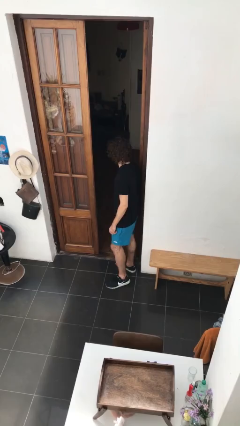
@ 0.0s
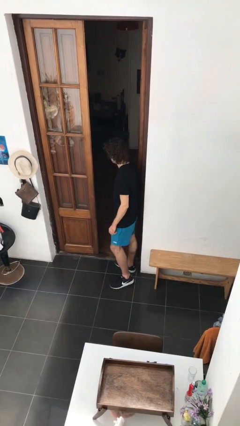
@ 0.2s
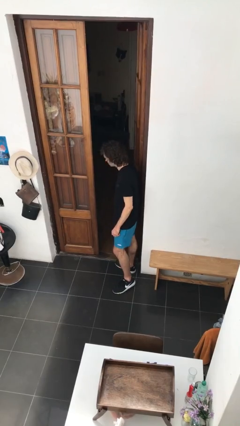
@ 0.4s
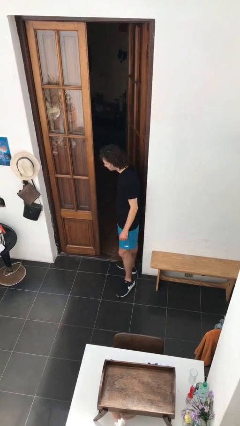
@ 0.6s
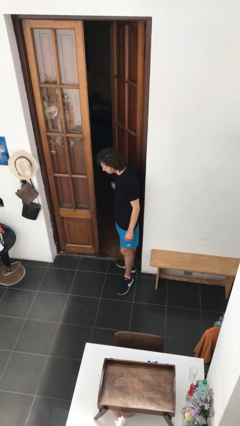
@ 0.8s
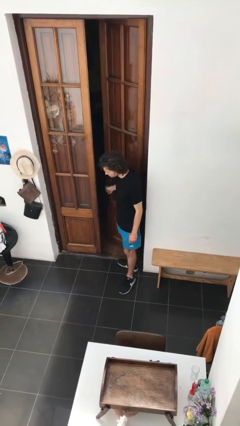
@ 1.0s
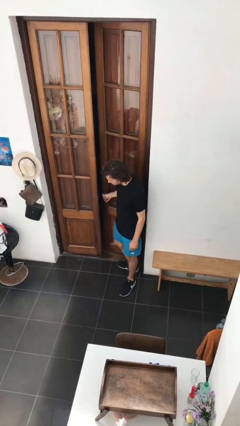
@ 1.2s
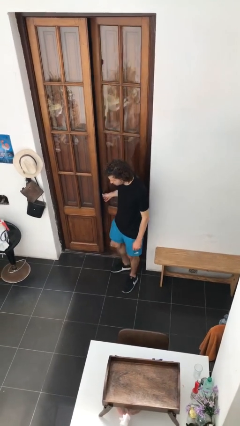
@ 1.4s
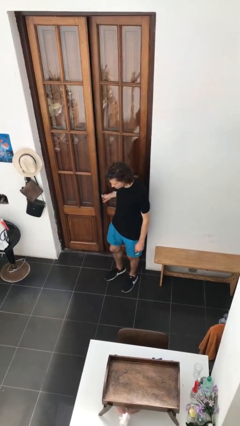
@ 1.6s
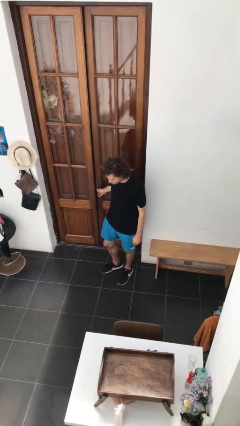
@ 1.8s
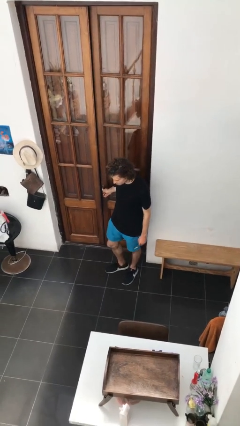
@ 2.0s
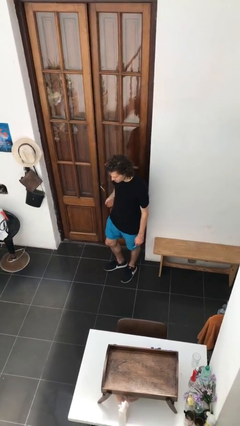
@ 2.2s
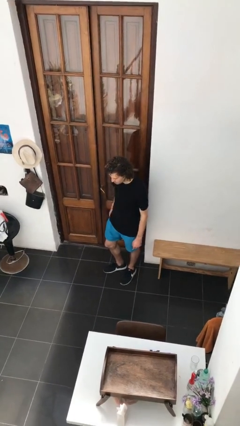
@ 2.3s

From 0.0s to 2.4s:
person closes facility door

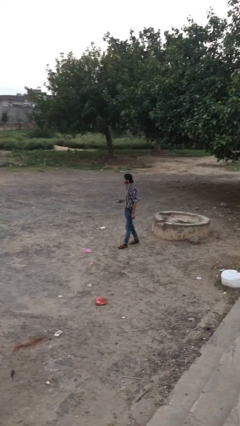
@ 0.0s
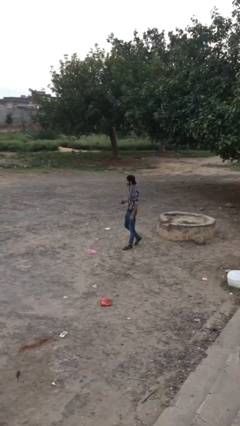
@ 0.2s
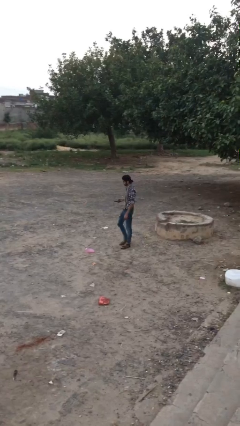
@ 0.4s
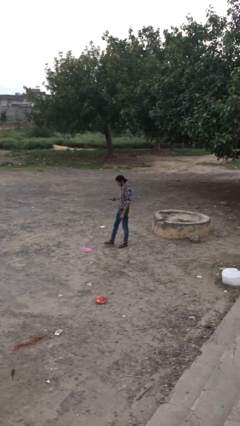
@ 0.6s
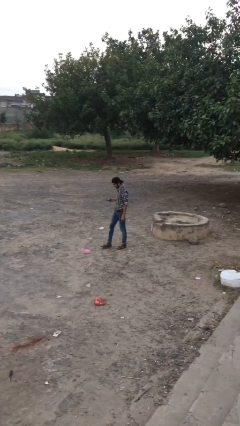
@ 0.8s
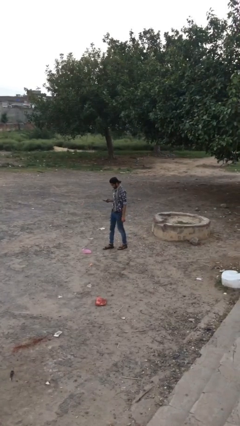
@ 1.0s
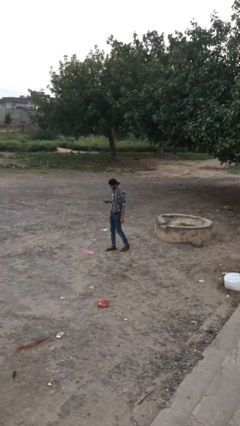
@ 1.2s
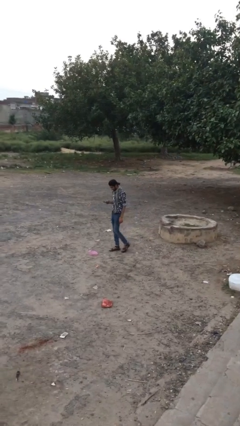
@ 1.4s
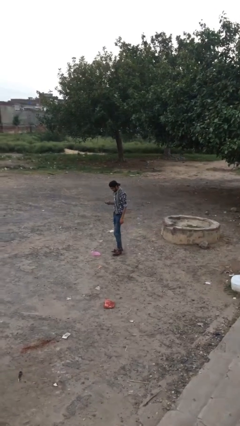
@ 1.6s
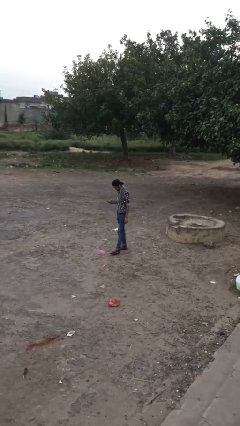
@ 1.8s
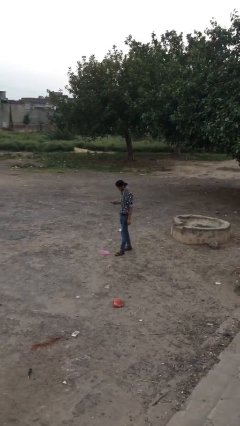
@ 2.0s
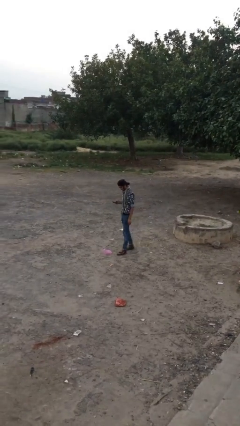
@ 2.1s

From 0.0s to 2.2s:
person texts on phone

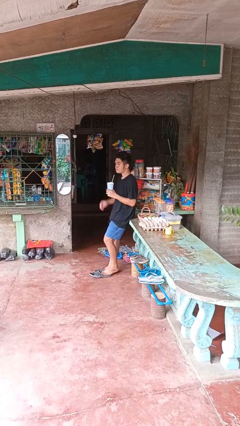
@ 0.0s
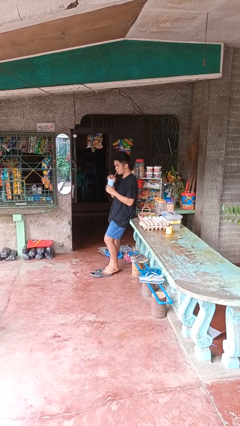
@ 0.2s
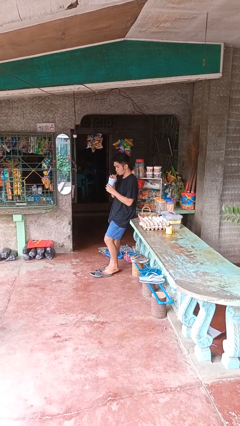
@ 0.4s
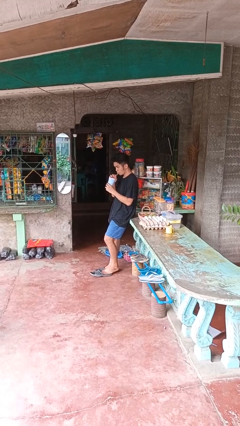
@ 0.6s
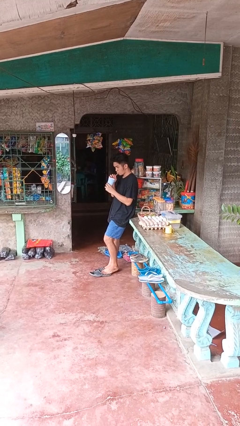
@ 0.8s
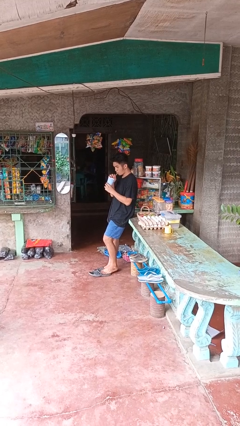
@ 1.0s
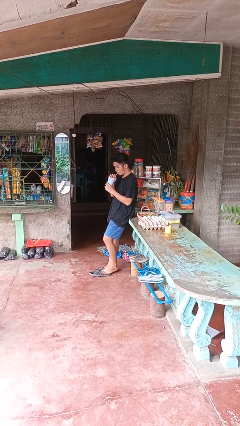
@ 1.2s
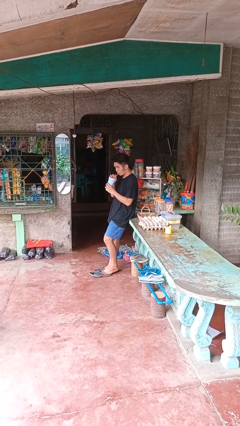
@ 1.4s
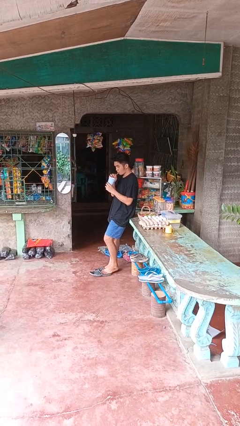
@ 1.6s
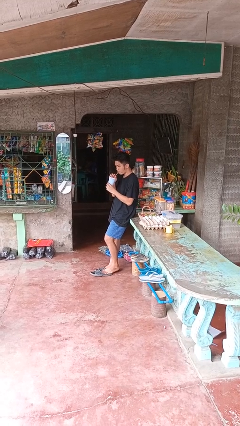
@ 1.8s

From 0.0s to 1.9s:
person drinks from straw

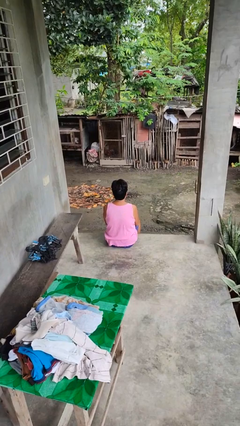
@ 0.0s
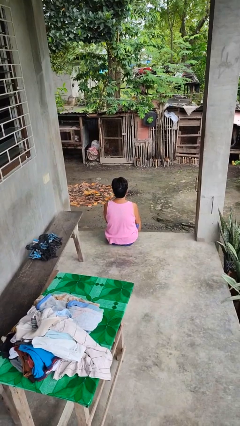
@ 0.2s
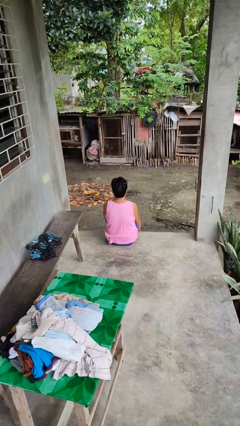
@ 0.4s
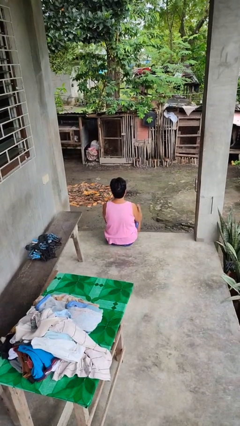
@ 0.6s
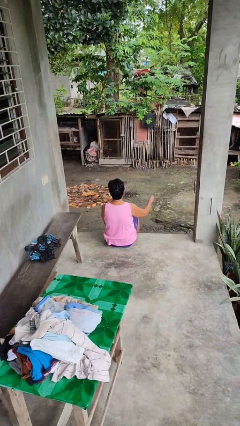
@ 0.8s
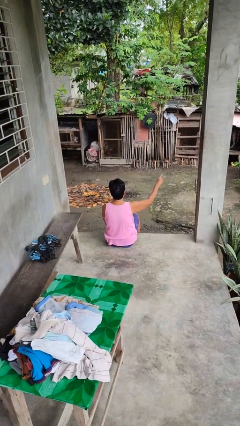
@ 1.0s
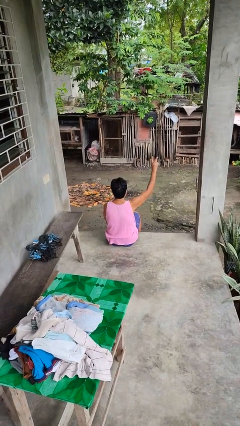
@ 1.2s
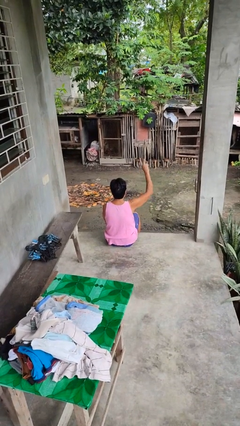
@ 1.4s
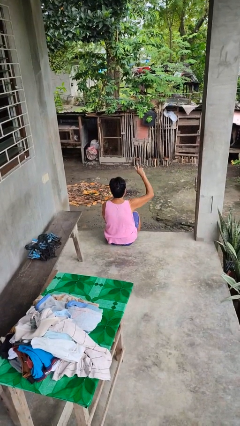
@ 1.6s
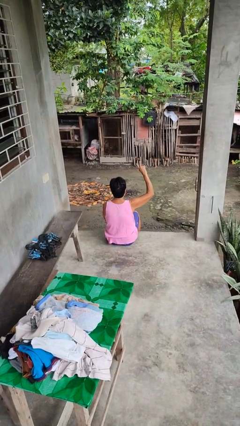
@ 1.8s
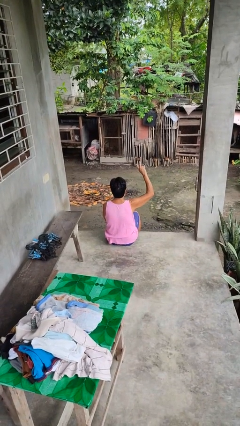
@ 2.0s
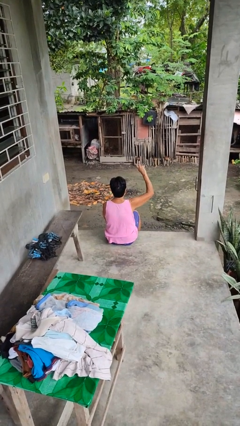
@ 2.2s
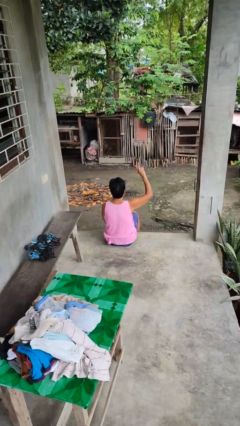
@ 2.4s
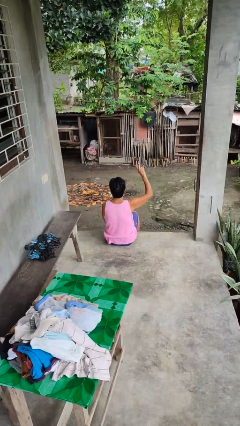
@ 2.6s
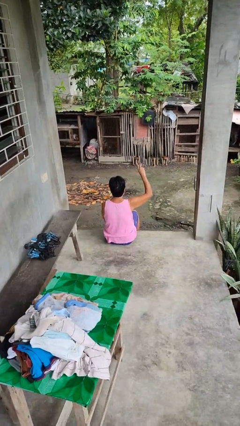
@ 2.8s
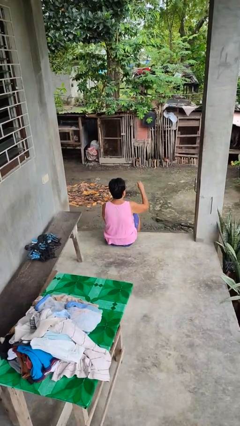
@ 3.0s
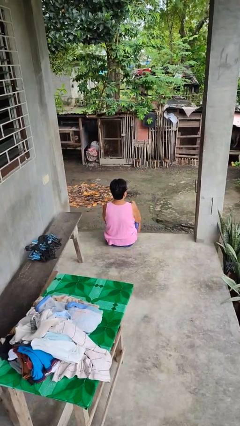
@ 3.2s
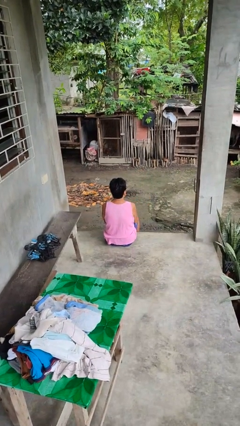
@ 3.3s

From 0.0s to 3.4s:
person gestures peace

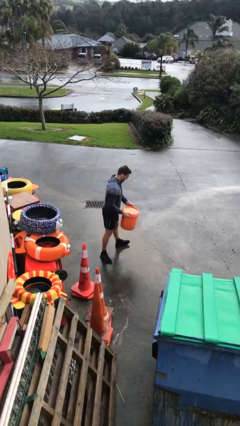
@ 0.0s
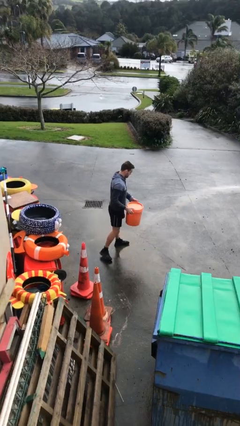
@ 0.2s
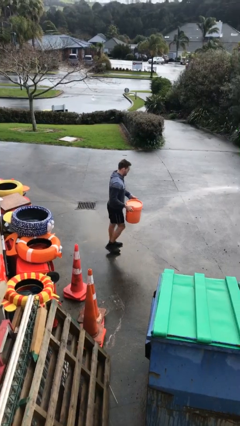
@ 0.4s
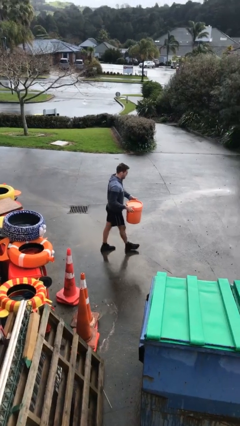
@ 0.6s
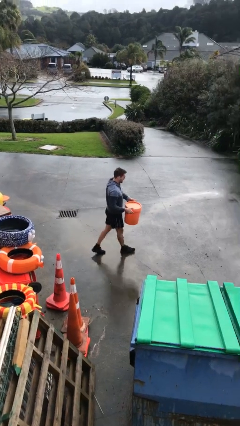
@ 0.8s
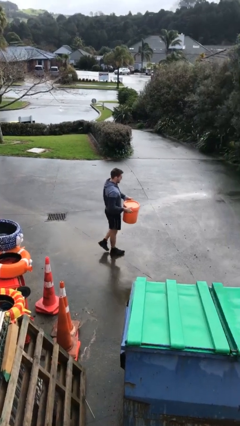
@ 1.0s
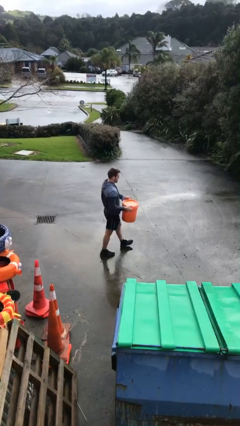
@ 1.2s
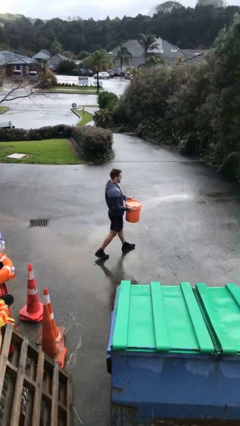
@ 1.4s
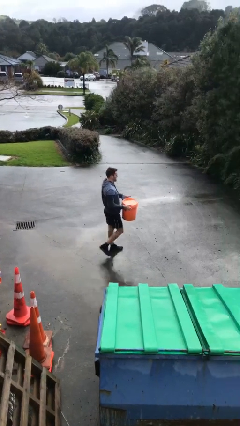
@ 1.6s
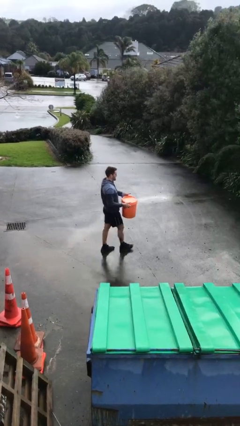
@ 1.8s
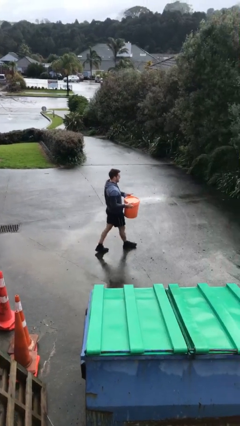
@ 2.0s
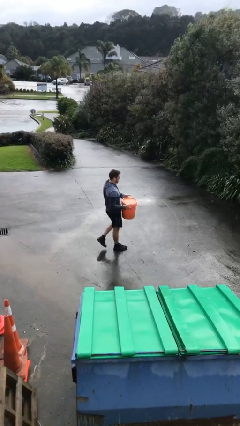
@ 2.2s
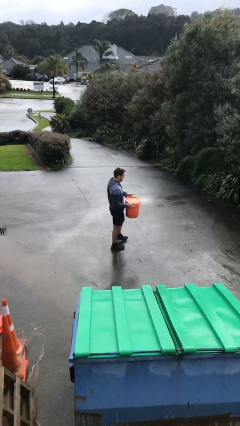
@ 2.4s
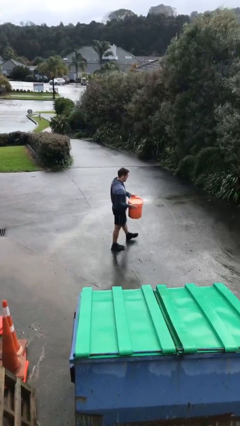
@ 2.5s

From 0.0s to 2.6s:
person carries heavy object

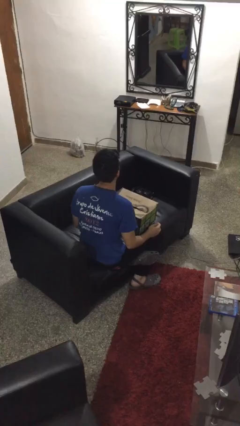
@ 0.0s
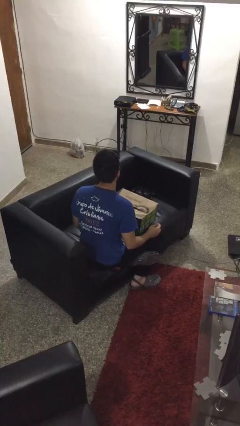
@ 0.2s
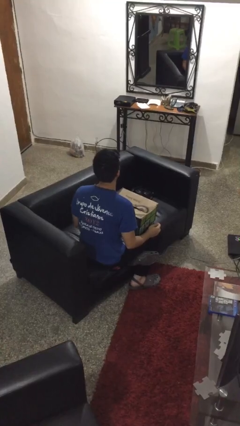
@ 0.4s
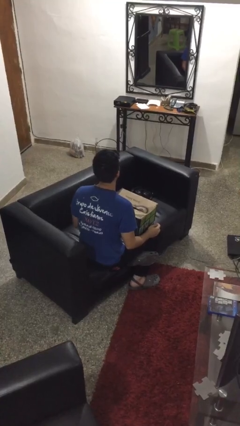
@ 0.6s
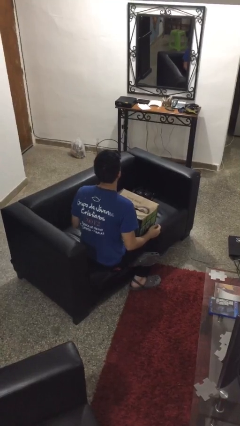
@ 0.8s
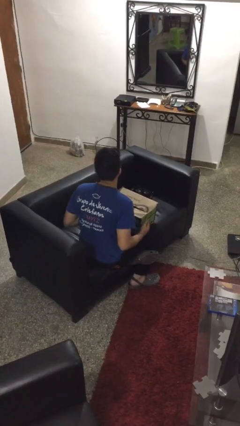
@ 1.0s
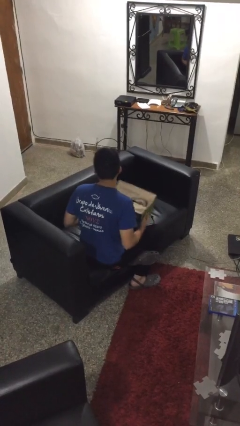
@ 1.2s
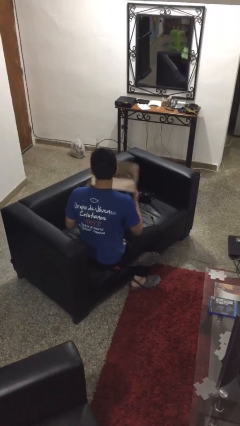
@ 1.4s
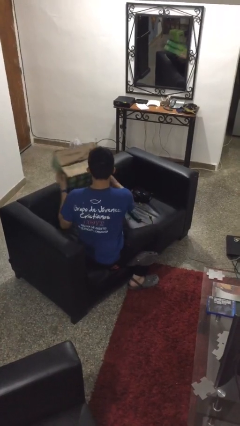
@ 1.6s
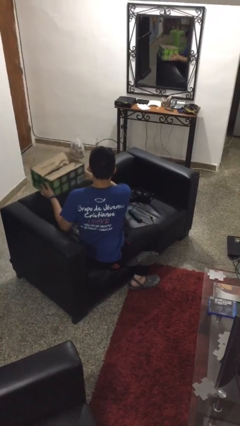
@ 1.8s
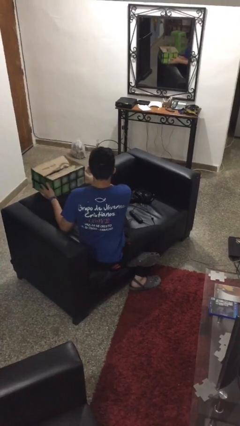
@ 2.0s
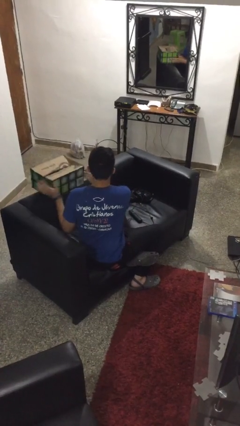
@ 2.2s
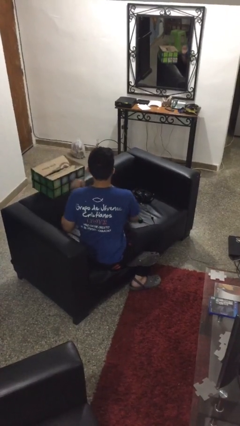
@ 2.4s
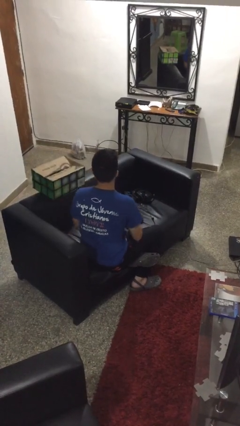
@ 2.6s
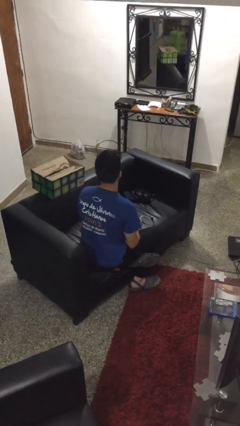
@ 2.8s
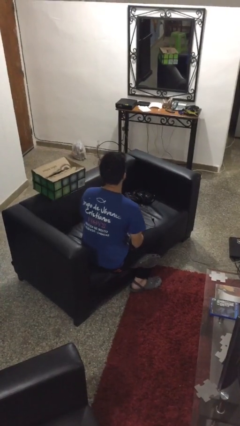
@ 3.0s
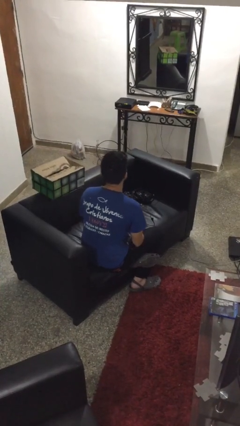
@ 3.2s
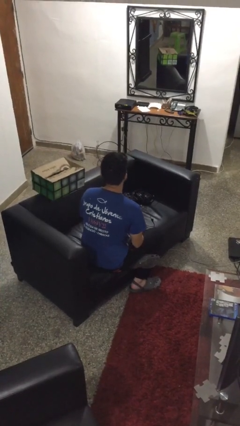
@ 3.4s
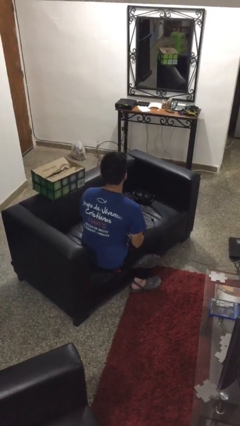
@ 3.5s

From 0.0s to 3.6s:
person puts down object on couch

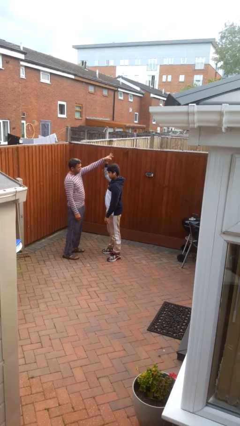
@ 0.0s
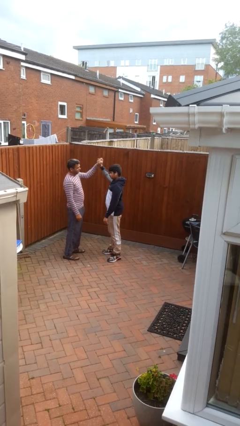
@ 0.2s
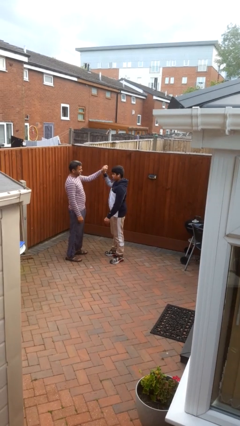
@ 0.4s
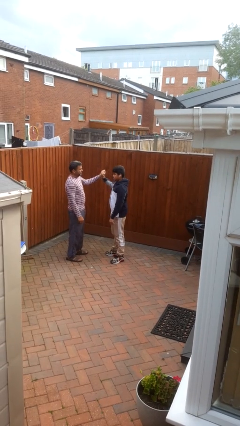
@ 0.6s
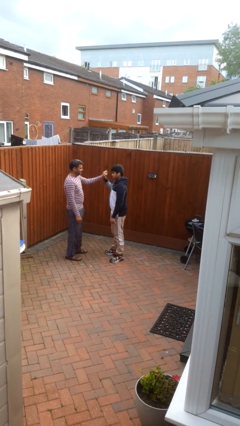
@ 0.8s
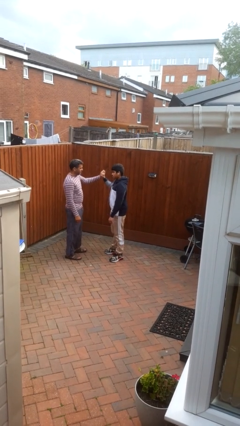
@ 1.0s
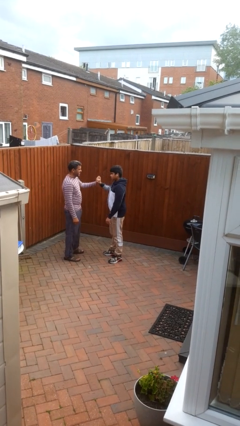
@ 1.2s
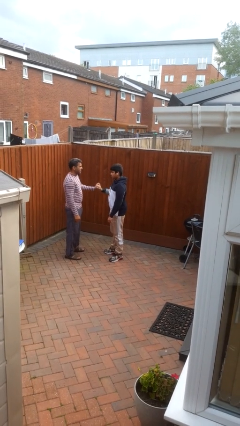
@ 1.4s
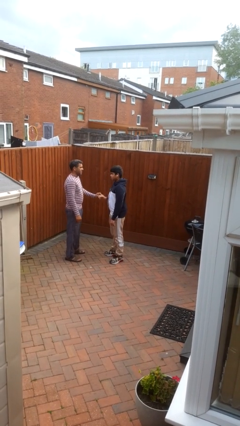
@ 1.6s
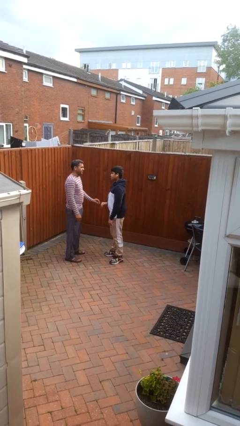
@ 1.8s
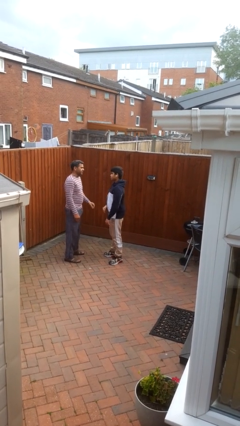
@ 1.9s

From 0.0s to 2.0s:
person highfives hand
